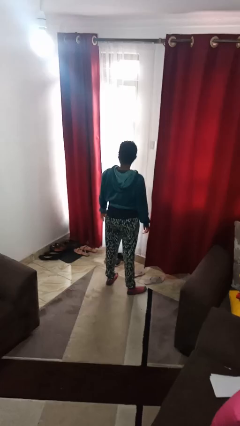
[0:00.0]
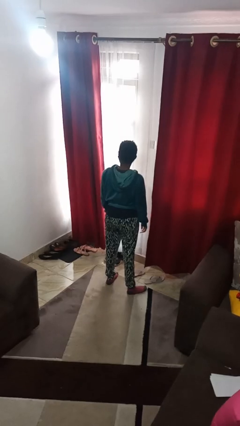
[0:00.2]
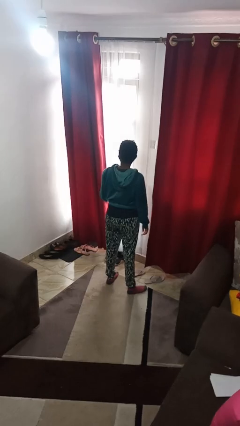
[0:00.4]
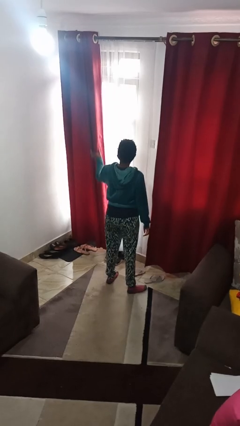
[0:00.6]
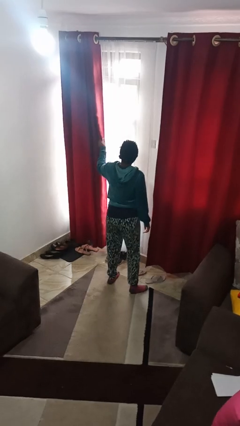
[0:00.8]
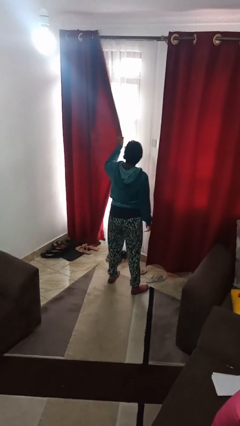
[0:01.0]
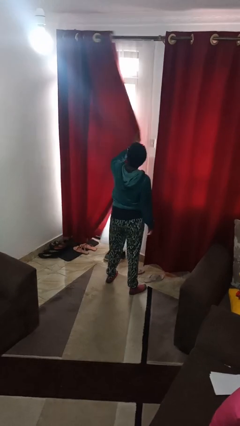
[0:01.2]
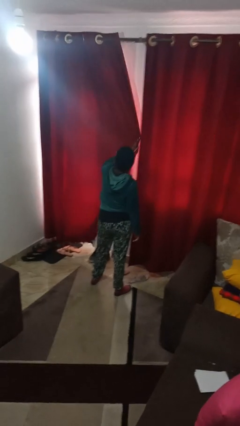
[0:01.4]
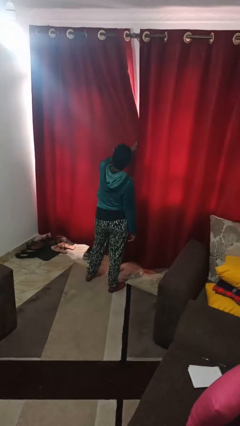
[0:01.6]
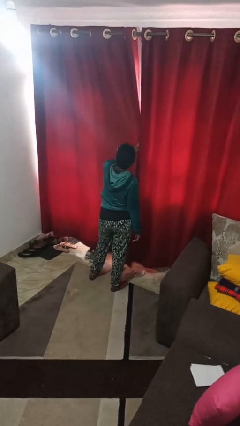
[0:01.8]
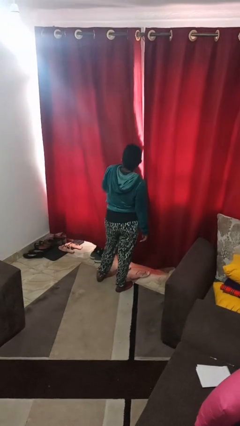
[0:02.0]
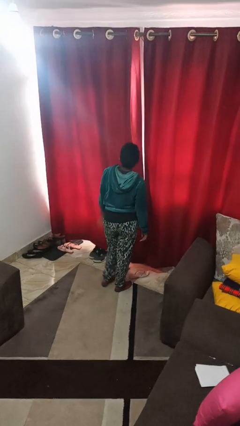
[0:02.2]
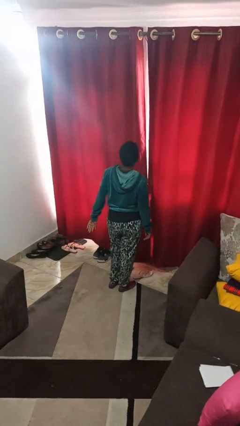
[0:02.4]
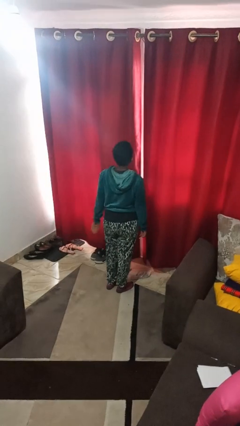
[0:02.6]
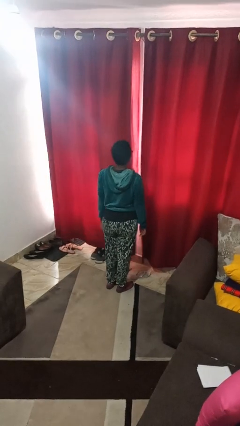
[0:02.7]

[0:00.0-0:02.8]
person closes curtains

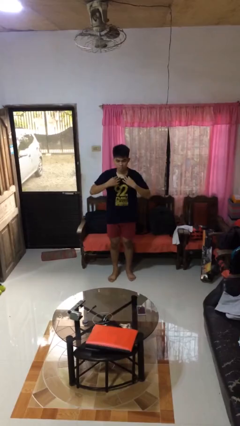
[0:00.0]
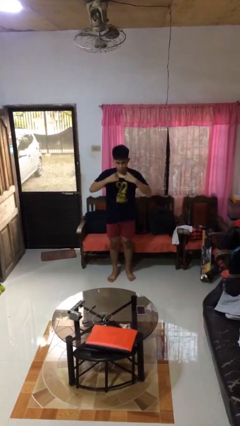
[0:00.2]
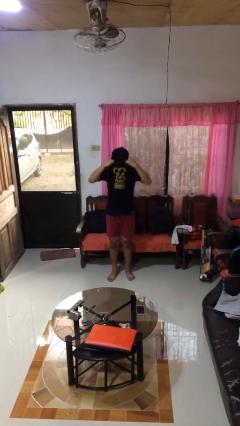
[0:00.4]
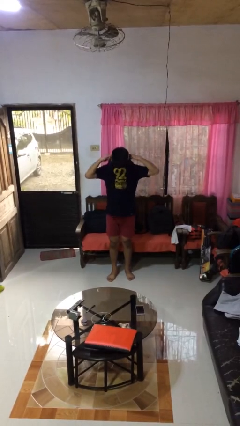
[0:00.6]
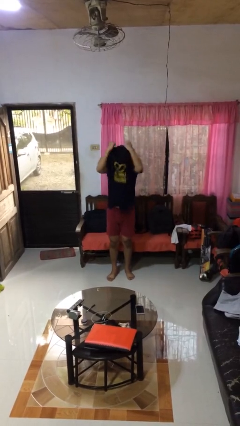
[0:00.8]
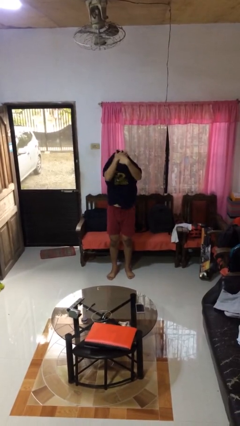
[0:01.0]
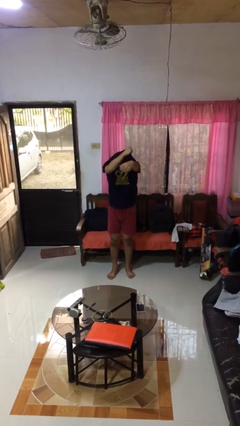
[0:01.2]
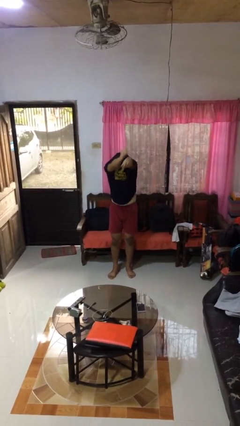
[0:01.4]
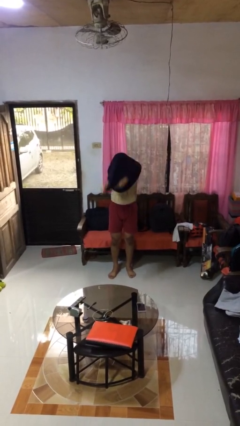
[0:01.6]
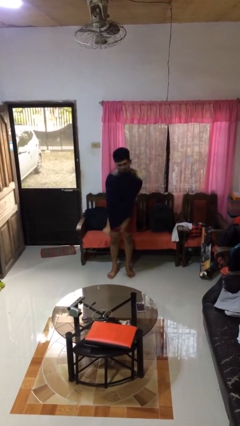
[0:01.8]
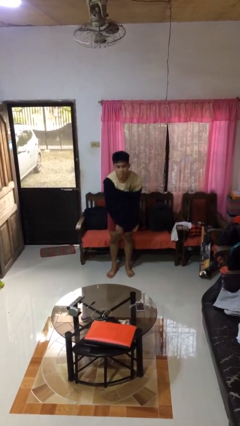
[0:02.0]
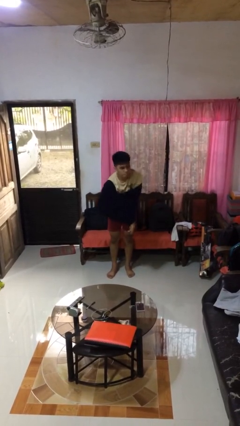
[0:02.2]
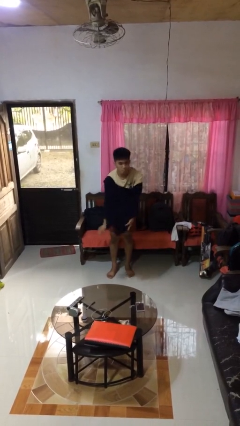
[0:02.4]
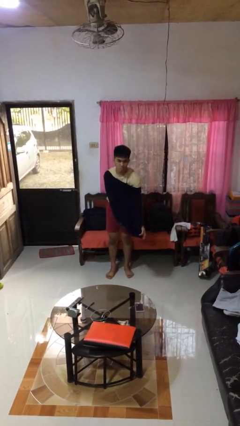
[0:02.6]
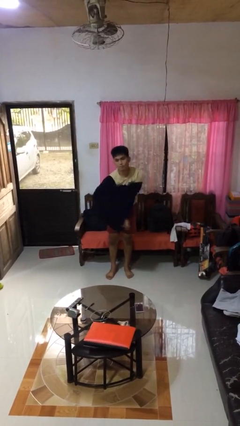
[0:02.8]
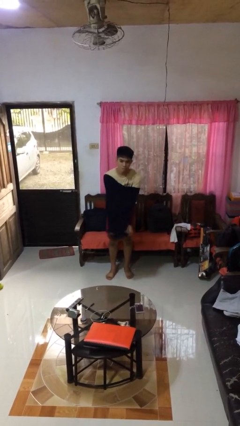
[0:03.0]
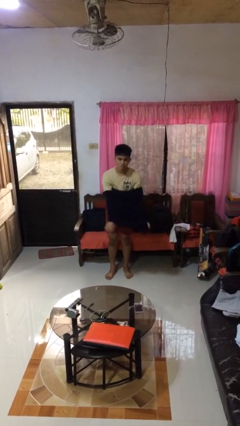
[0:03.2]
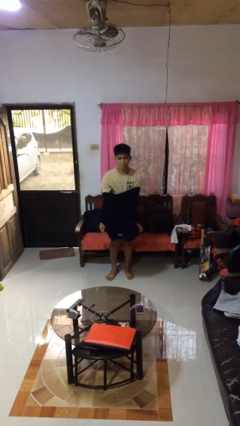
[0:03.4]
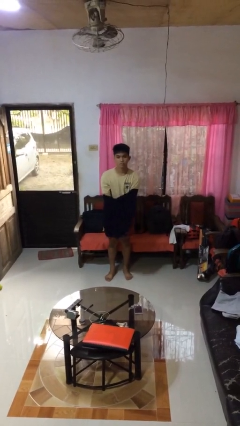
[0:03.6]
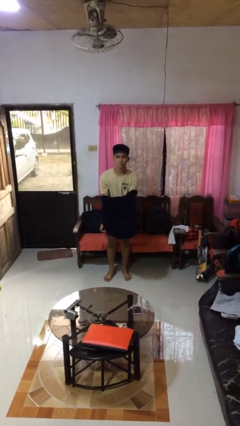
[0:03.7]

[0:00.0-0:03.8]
person takes off shirt

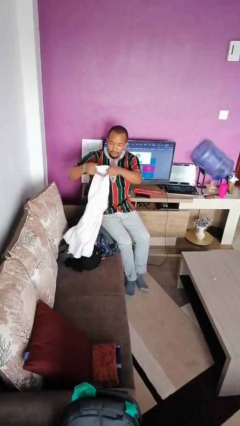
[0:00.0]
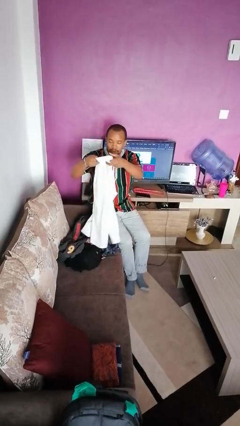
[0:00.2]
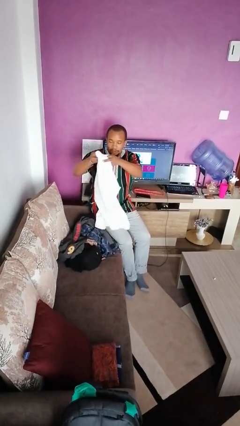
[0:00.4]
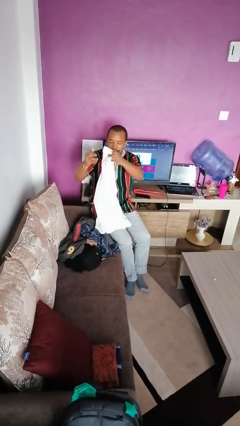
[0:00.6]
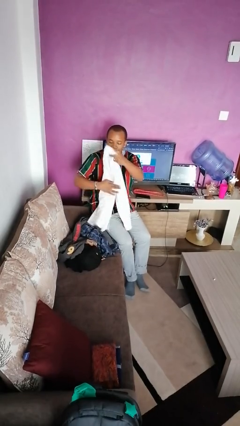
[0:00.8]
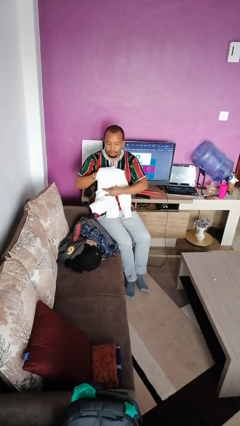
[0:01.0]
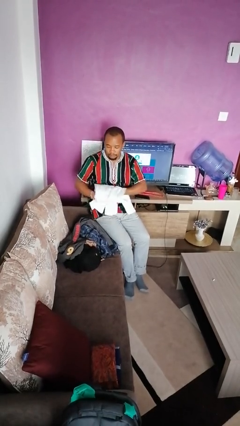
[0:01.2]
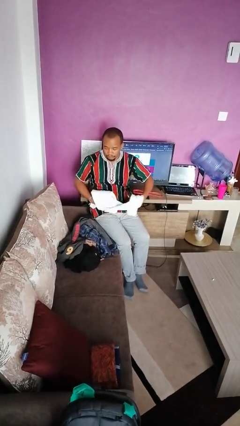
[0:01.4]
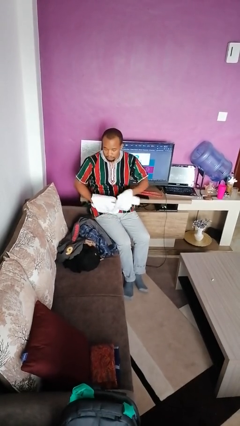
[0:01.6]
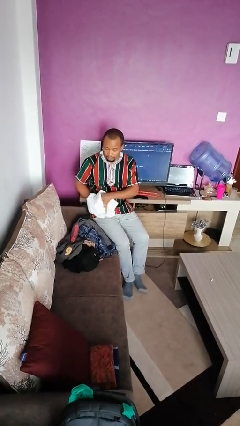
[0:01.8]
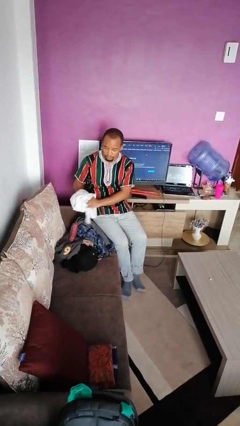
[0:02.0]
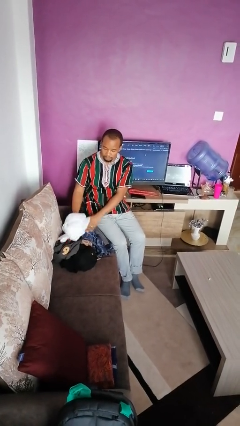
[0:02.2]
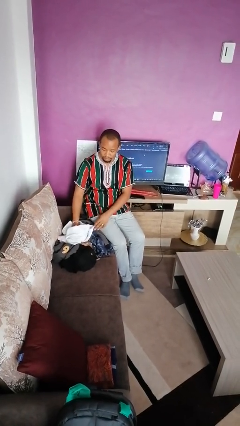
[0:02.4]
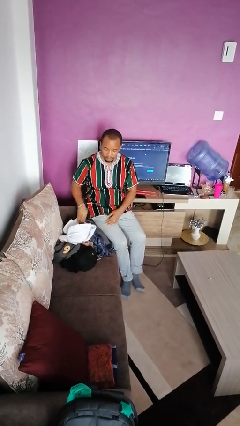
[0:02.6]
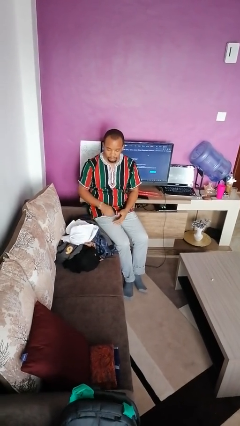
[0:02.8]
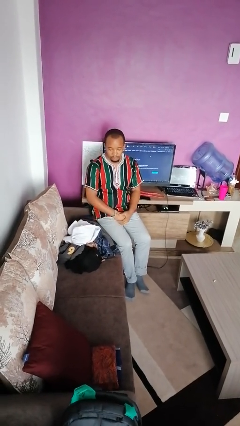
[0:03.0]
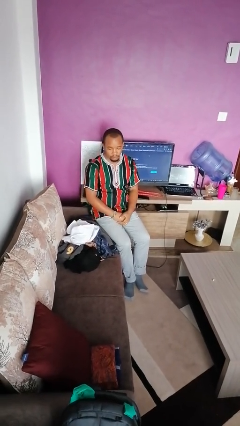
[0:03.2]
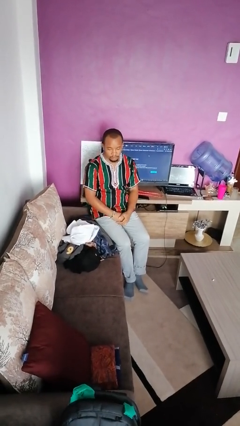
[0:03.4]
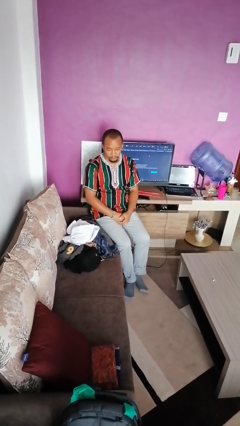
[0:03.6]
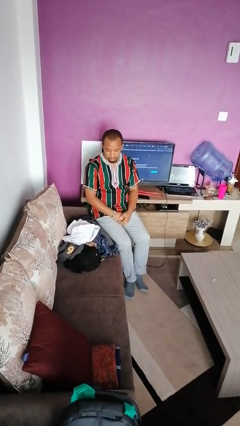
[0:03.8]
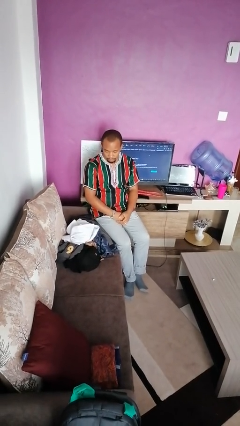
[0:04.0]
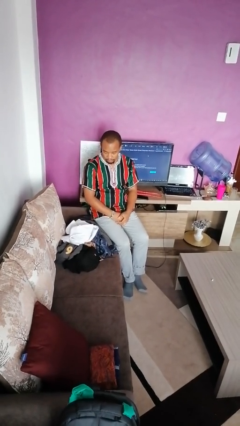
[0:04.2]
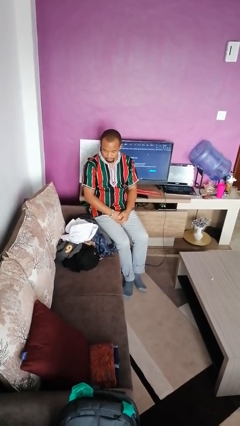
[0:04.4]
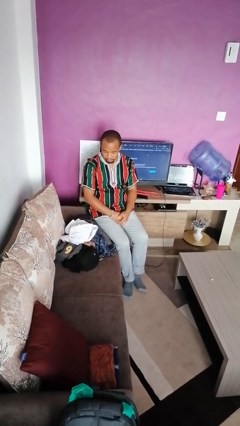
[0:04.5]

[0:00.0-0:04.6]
person folds shirt

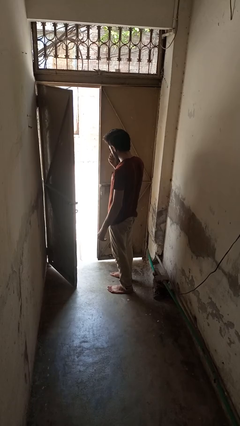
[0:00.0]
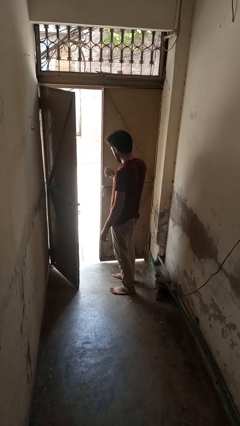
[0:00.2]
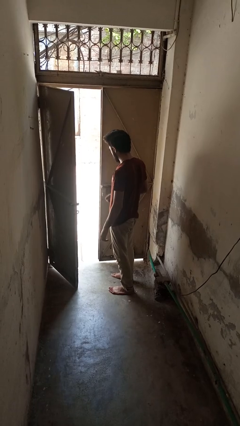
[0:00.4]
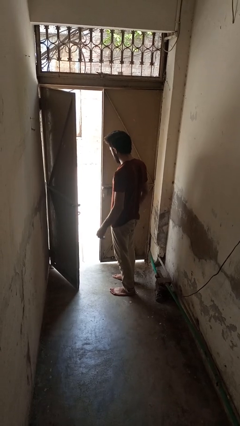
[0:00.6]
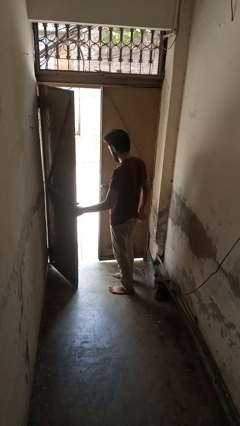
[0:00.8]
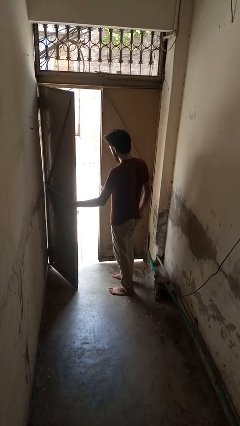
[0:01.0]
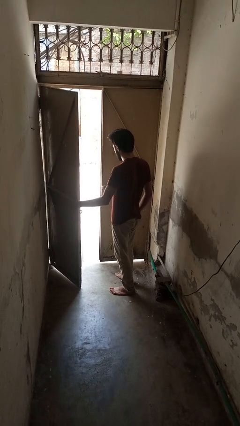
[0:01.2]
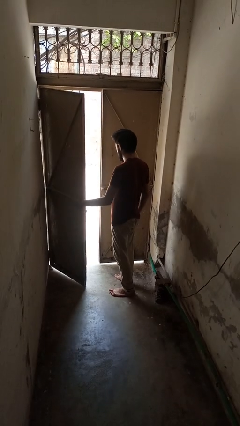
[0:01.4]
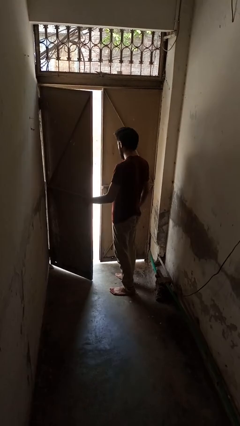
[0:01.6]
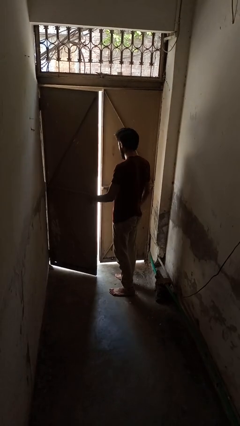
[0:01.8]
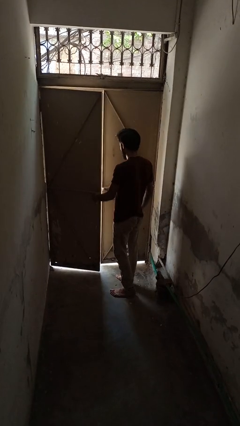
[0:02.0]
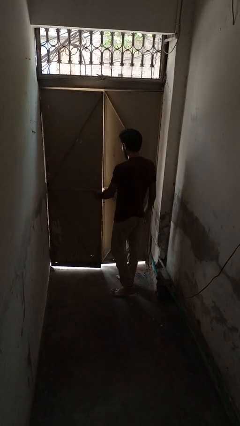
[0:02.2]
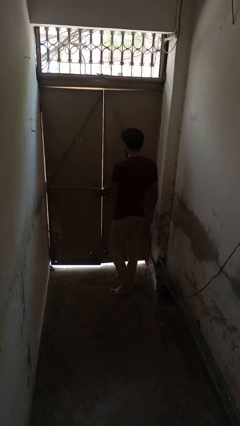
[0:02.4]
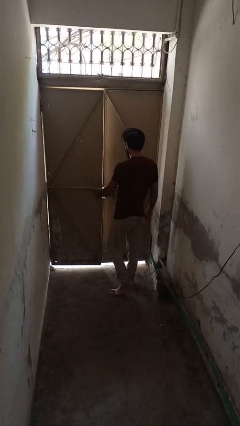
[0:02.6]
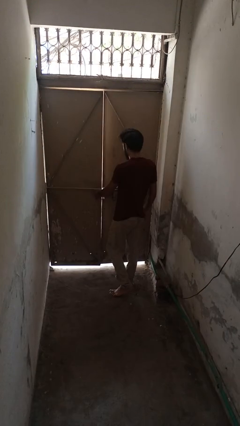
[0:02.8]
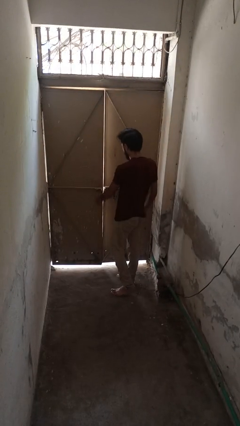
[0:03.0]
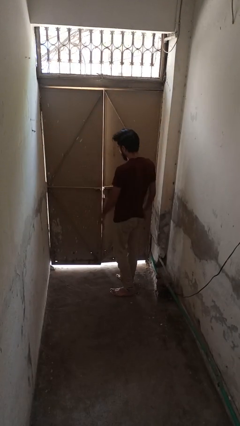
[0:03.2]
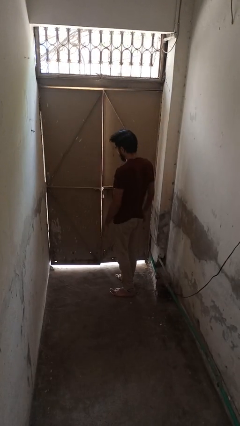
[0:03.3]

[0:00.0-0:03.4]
person closes gate

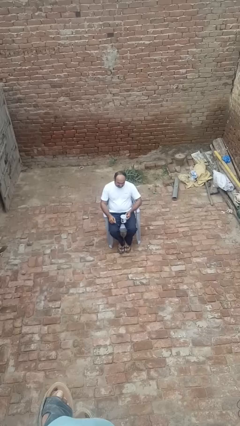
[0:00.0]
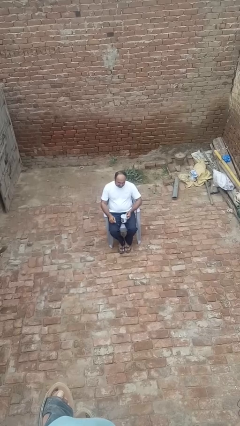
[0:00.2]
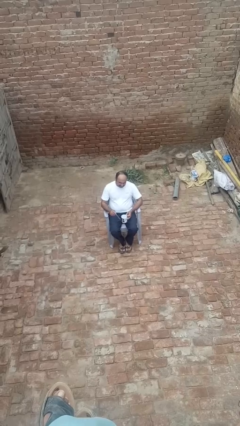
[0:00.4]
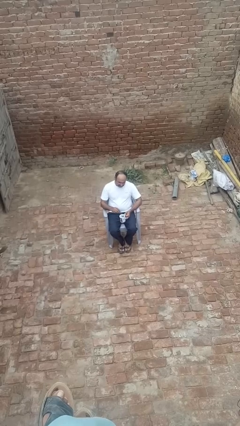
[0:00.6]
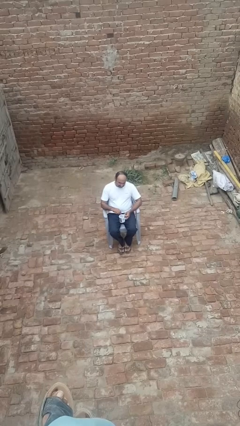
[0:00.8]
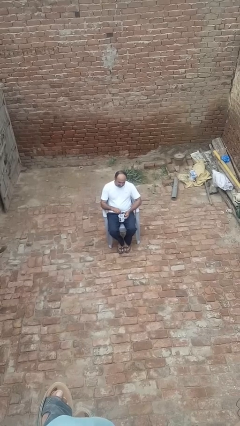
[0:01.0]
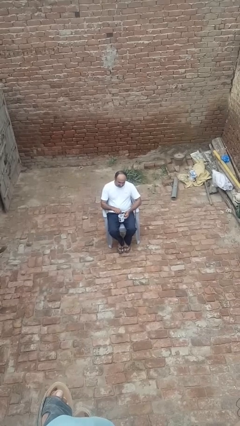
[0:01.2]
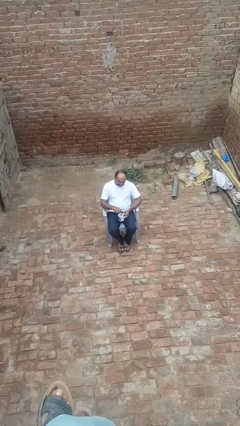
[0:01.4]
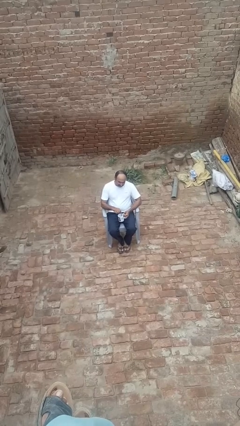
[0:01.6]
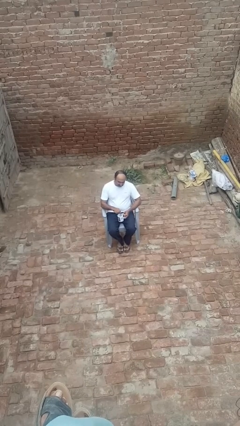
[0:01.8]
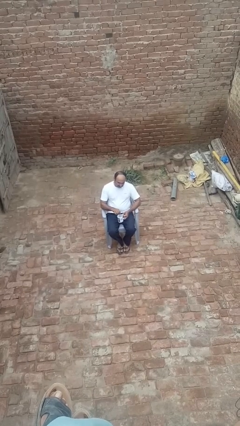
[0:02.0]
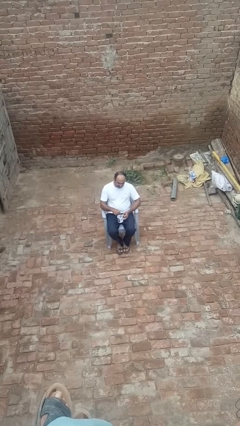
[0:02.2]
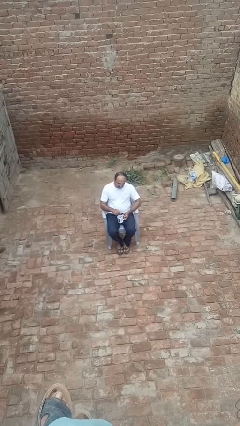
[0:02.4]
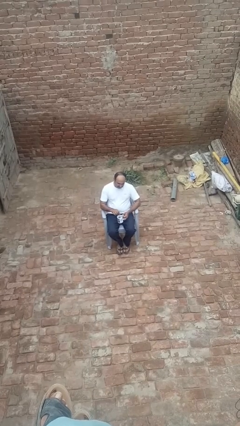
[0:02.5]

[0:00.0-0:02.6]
person stirs mug

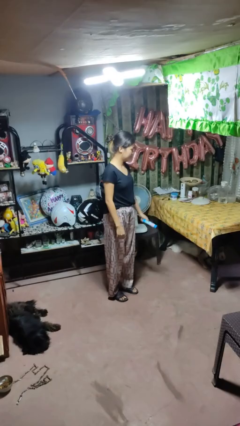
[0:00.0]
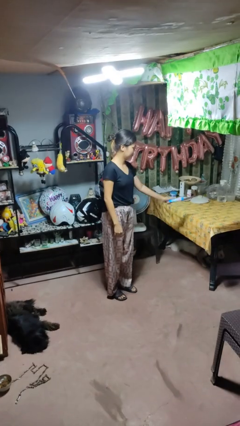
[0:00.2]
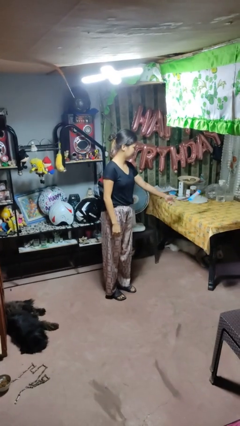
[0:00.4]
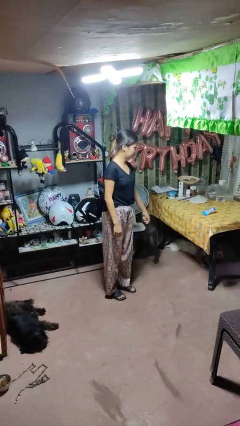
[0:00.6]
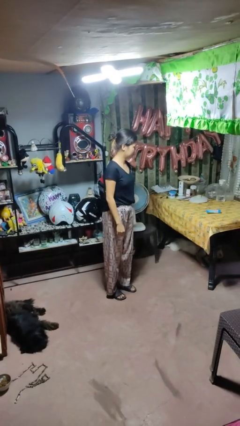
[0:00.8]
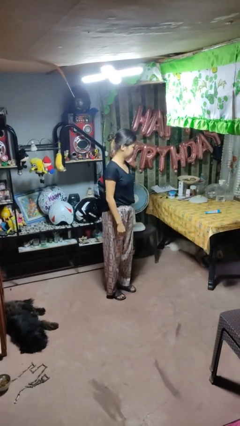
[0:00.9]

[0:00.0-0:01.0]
person throws object on table
